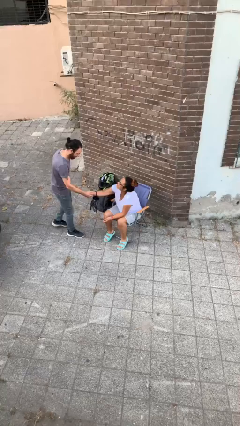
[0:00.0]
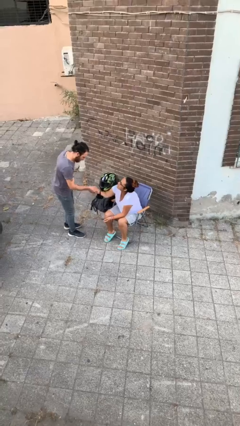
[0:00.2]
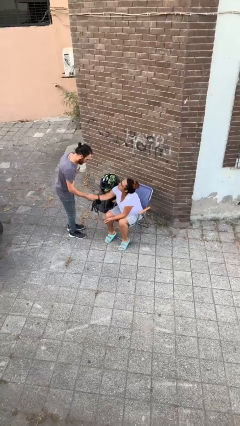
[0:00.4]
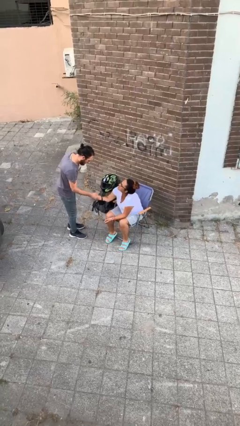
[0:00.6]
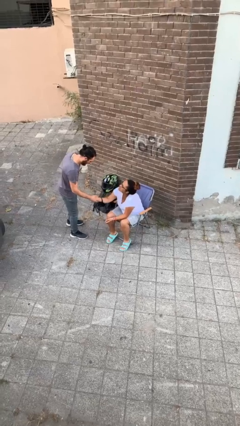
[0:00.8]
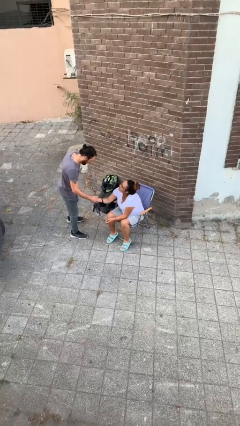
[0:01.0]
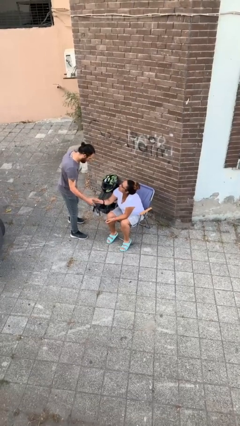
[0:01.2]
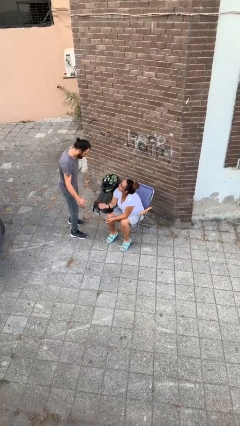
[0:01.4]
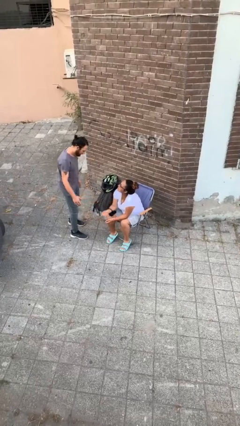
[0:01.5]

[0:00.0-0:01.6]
person shakes hand

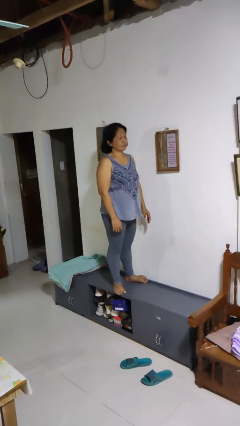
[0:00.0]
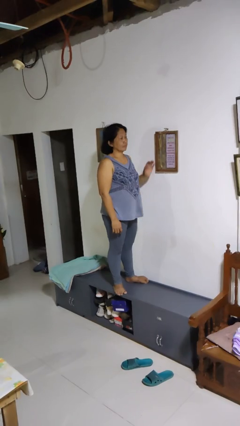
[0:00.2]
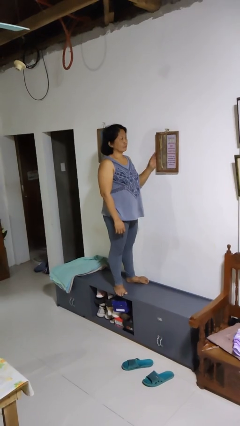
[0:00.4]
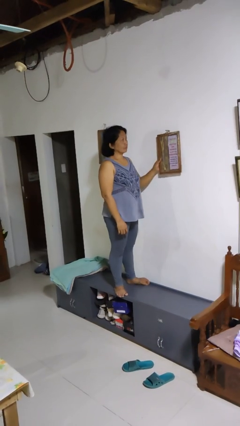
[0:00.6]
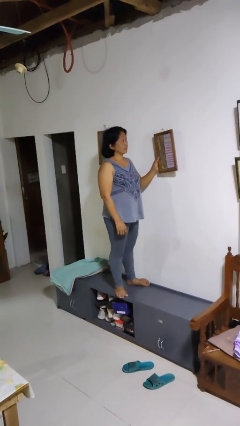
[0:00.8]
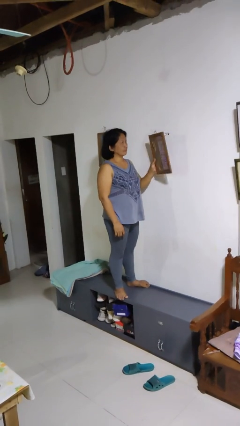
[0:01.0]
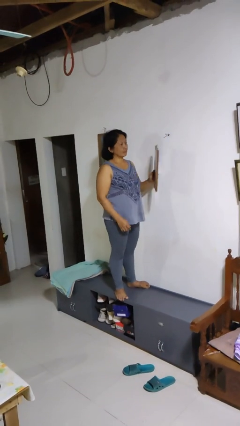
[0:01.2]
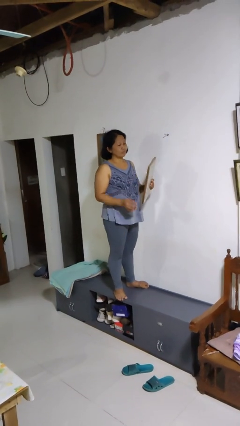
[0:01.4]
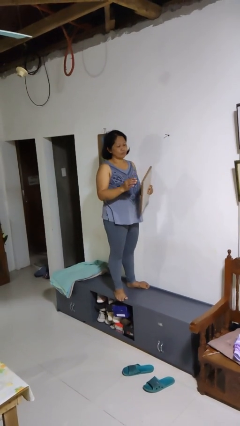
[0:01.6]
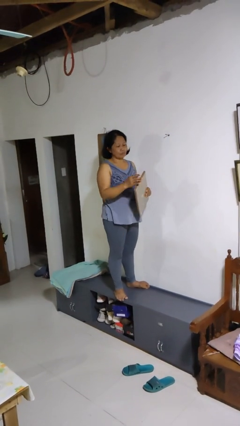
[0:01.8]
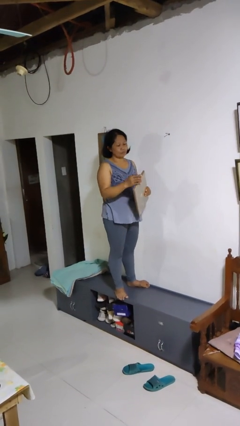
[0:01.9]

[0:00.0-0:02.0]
person takes down picture frame

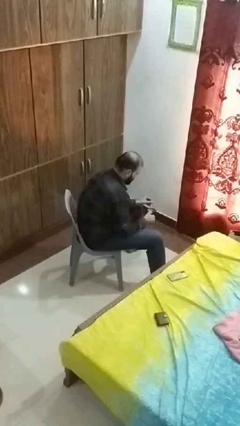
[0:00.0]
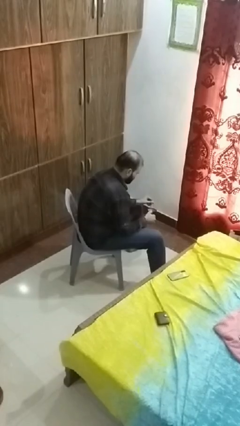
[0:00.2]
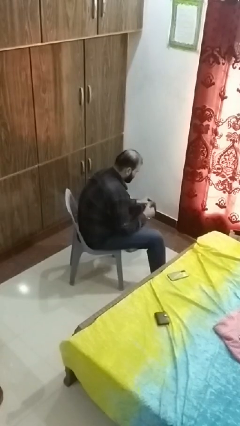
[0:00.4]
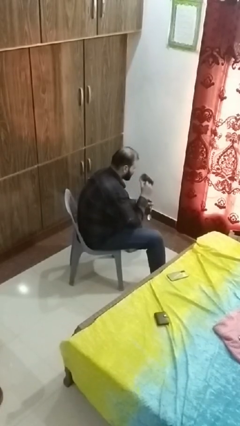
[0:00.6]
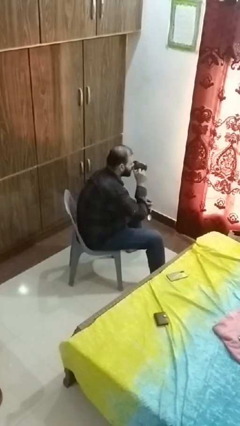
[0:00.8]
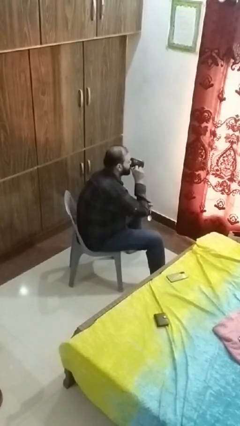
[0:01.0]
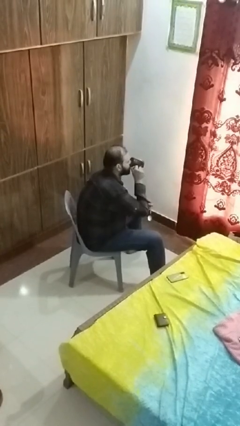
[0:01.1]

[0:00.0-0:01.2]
person drinks from mug

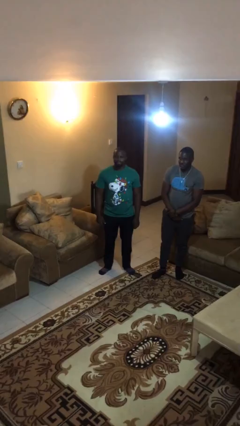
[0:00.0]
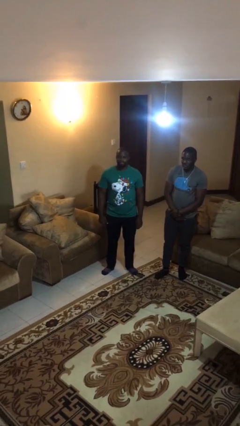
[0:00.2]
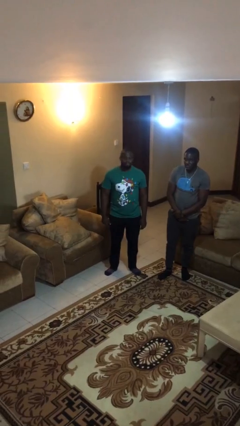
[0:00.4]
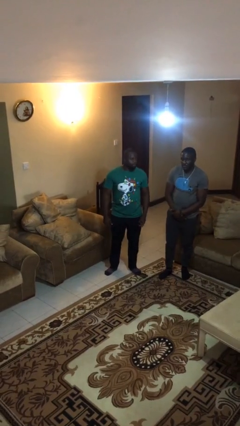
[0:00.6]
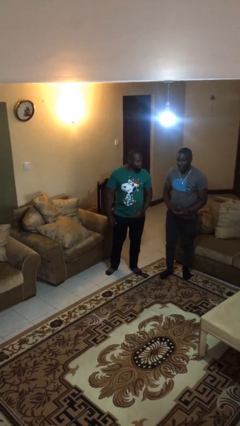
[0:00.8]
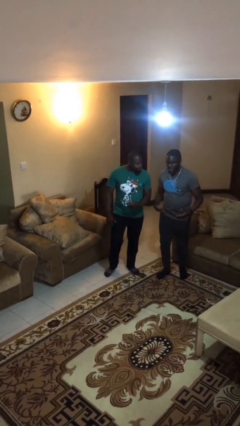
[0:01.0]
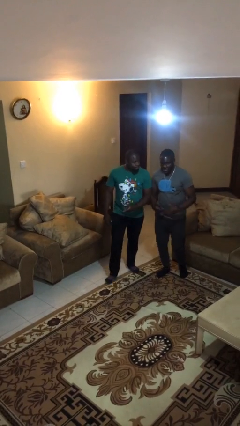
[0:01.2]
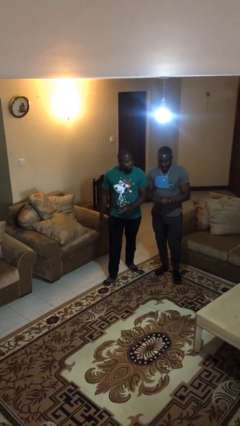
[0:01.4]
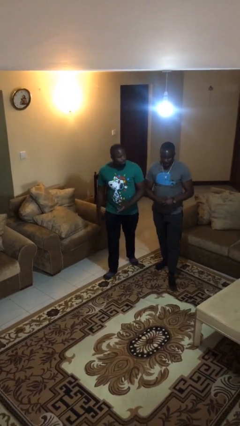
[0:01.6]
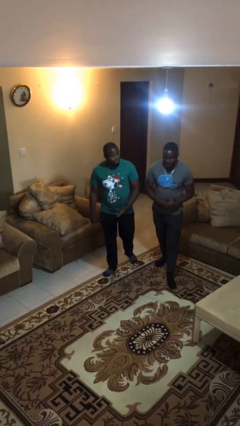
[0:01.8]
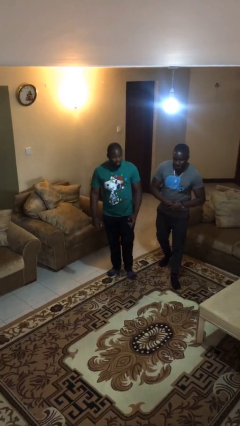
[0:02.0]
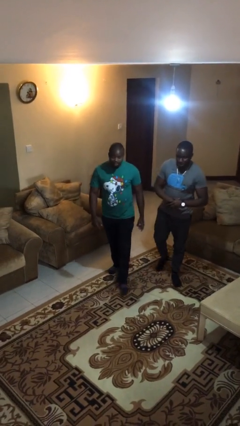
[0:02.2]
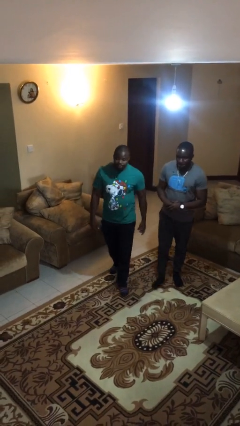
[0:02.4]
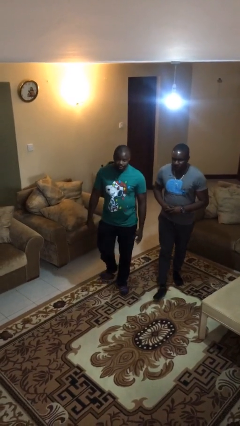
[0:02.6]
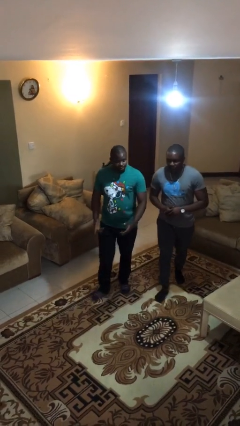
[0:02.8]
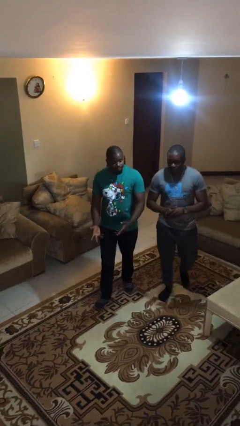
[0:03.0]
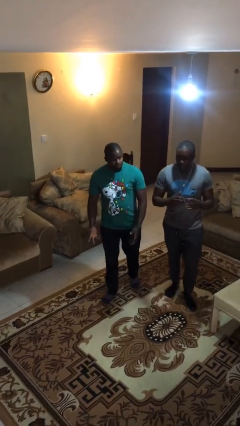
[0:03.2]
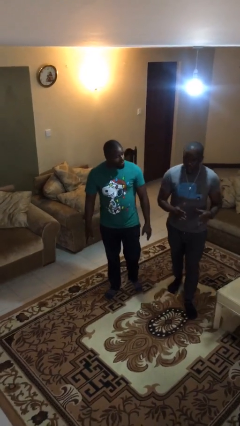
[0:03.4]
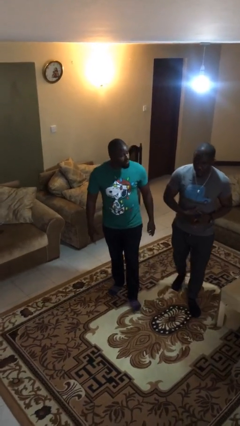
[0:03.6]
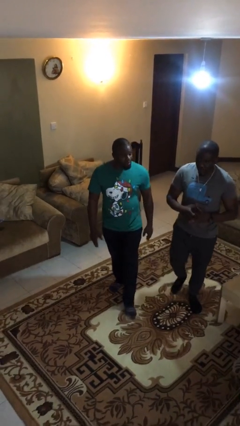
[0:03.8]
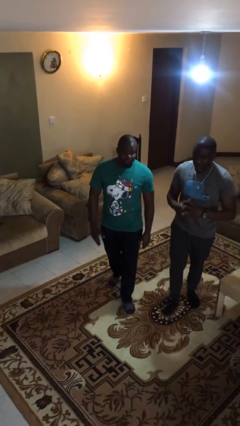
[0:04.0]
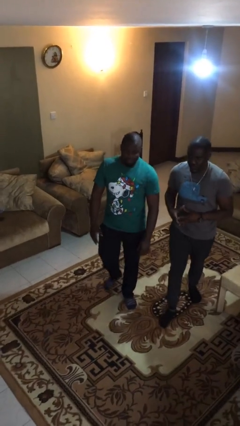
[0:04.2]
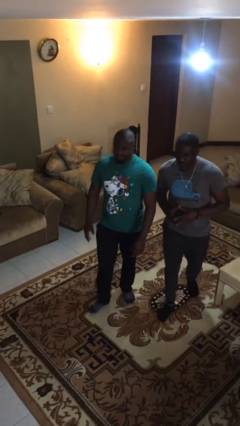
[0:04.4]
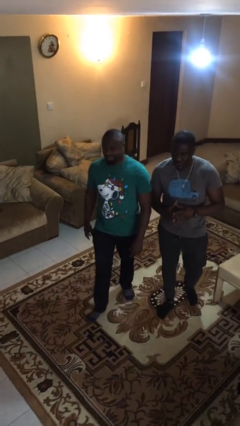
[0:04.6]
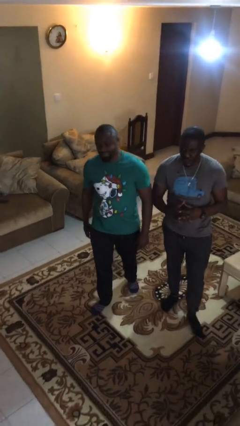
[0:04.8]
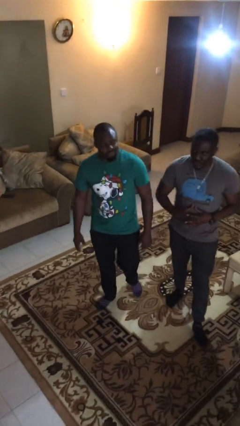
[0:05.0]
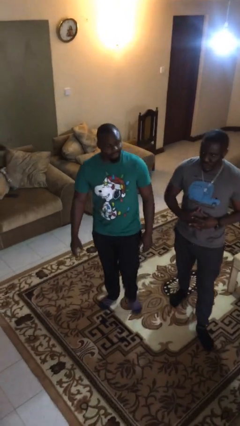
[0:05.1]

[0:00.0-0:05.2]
person talks to person

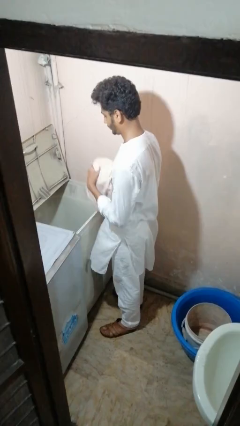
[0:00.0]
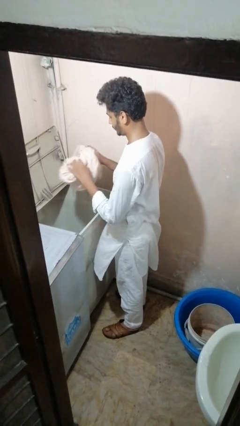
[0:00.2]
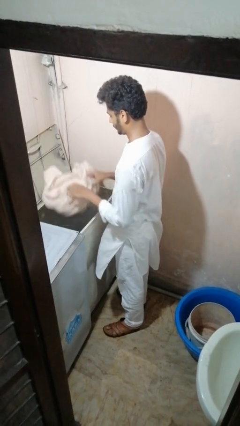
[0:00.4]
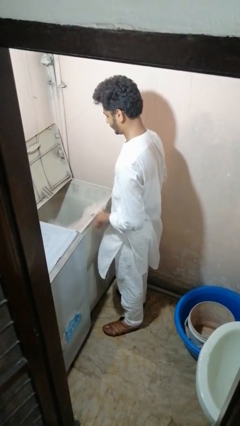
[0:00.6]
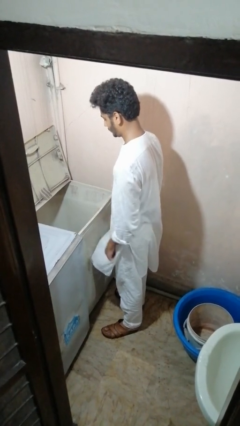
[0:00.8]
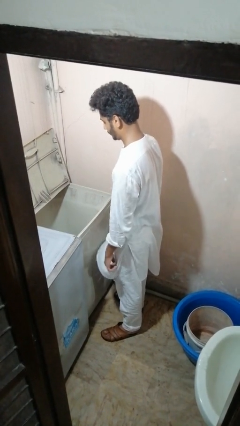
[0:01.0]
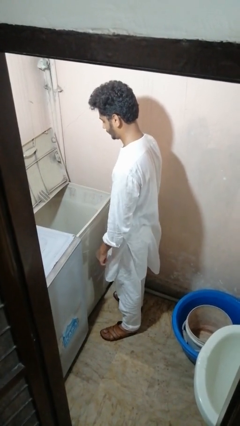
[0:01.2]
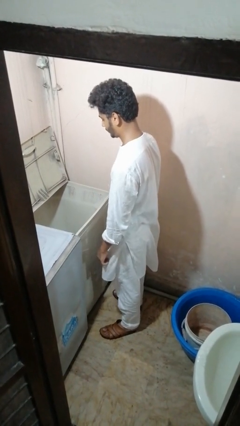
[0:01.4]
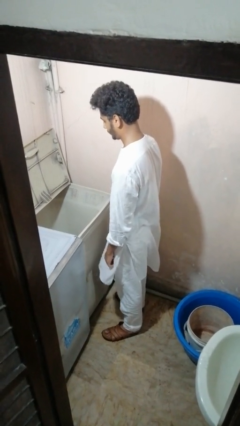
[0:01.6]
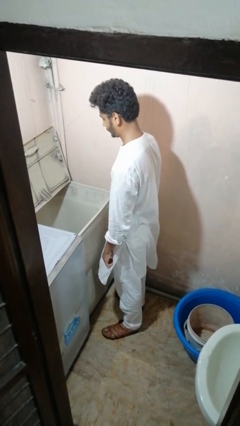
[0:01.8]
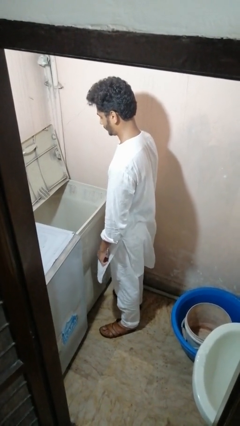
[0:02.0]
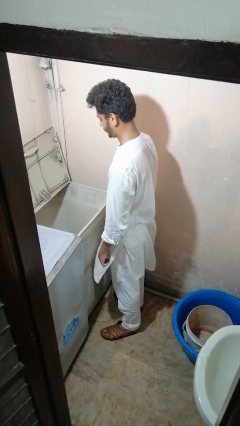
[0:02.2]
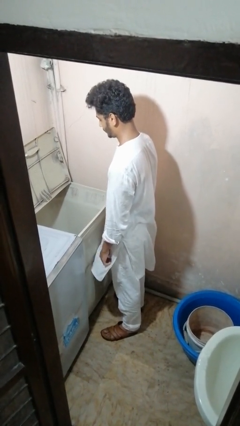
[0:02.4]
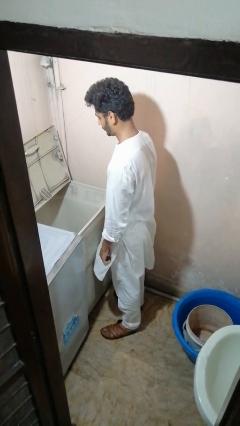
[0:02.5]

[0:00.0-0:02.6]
person loads clotheswasher

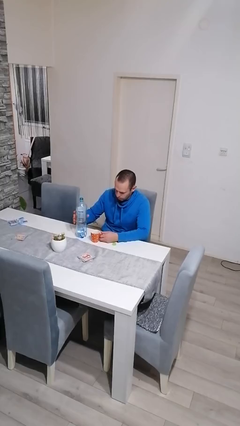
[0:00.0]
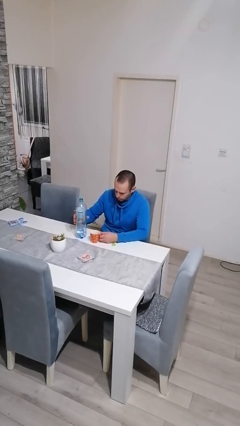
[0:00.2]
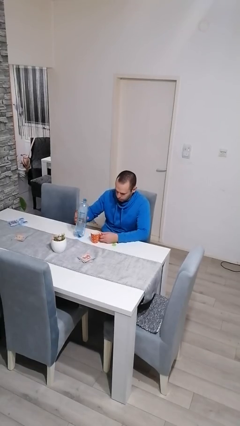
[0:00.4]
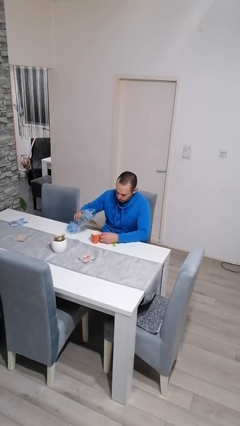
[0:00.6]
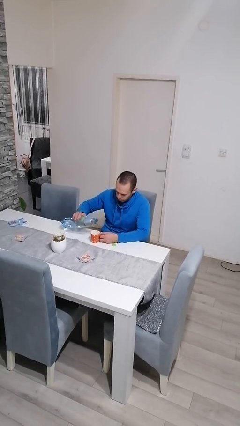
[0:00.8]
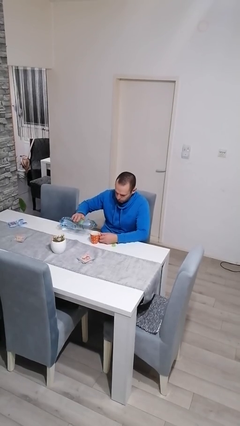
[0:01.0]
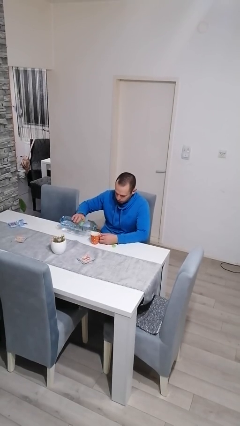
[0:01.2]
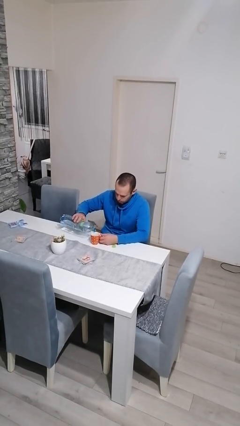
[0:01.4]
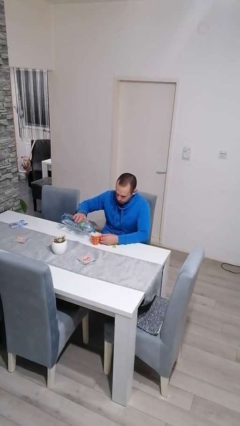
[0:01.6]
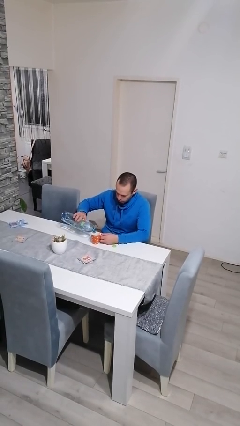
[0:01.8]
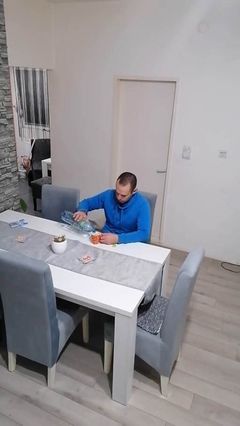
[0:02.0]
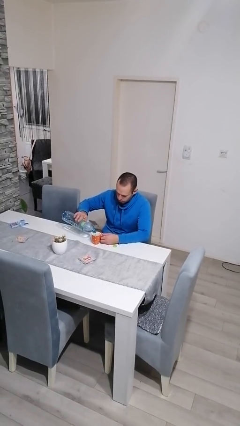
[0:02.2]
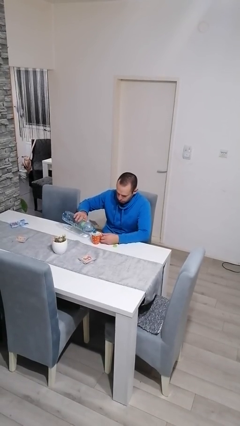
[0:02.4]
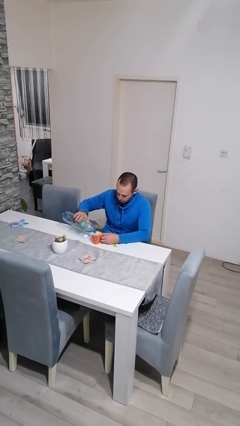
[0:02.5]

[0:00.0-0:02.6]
person pours liquid into cup

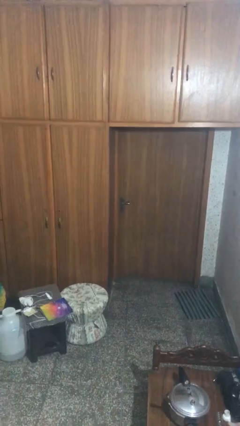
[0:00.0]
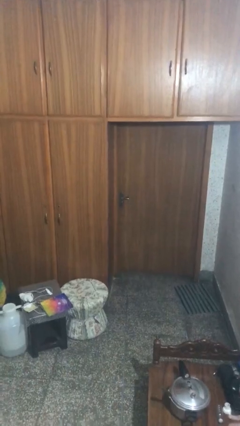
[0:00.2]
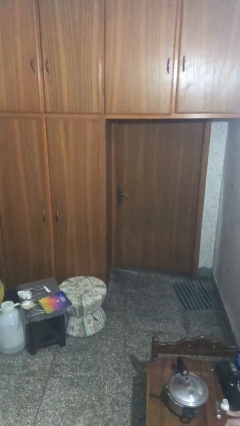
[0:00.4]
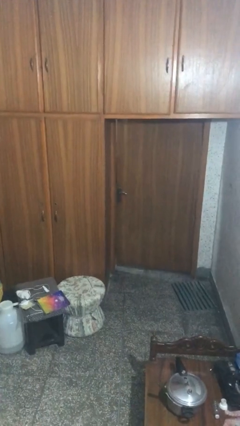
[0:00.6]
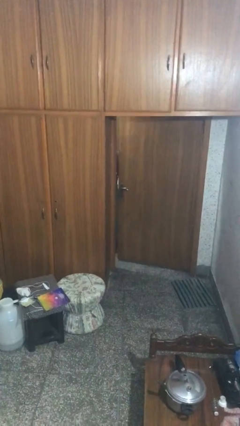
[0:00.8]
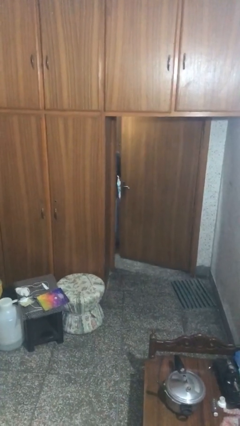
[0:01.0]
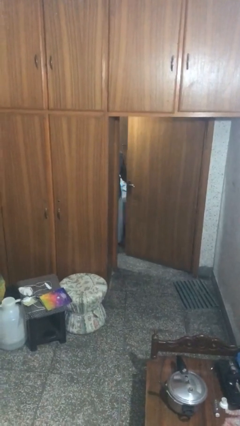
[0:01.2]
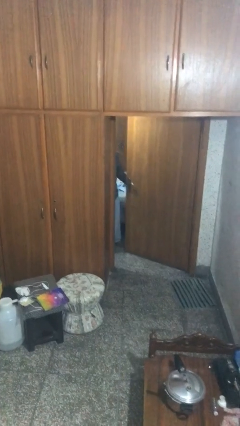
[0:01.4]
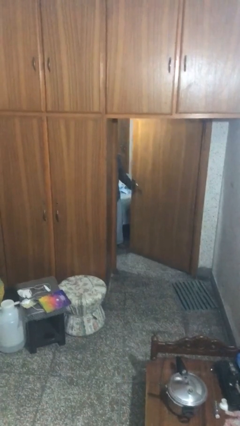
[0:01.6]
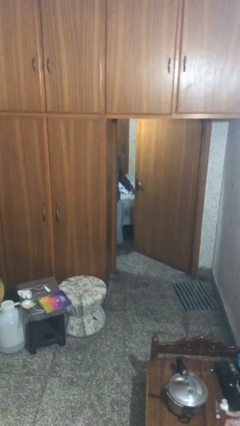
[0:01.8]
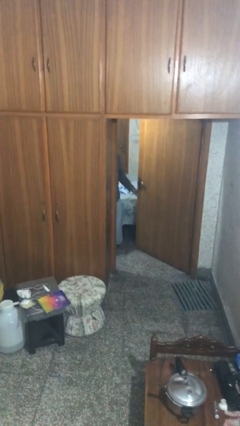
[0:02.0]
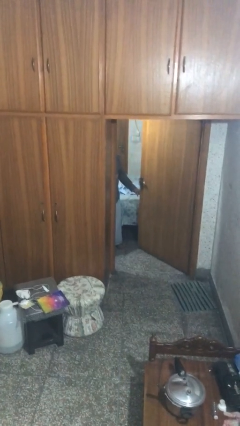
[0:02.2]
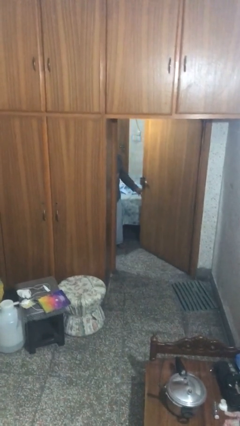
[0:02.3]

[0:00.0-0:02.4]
person opens facility door
